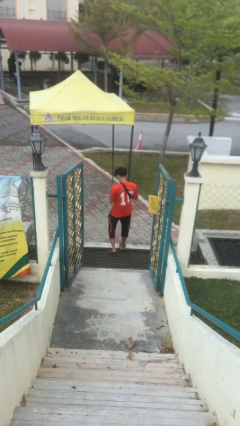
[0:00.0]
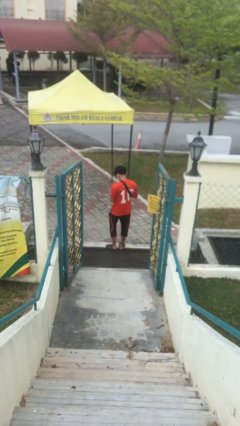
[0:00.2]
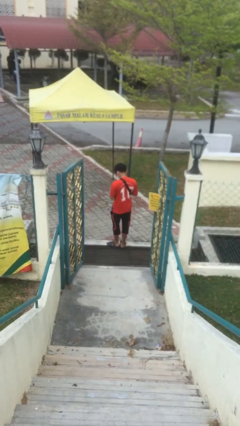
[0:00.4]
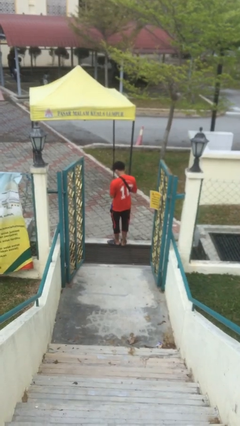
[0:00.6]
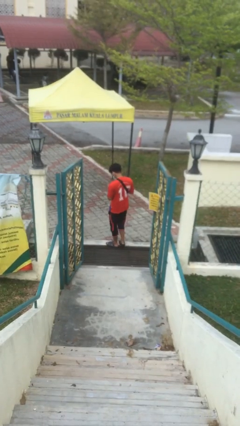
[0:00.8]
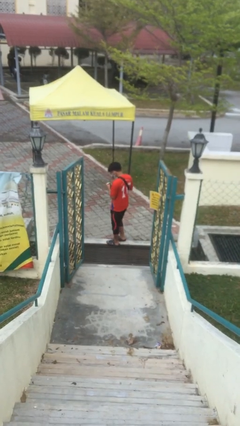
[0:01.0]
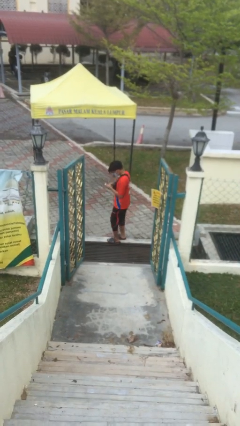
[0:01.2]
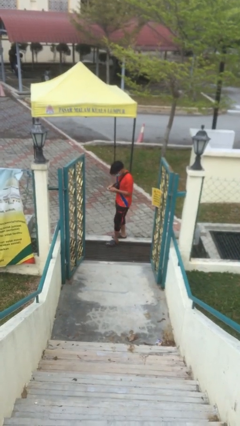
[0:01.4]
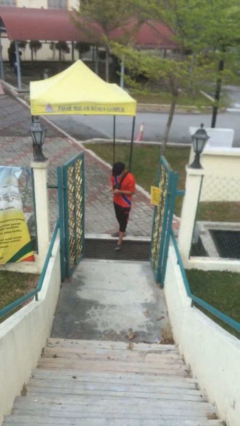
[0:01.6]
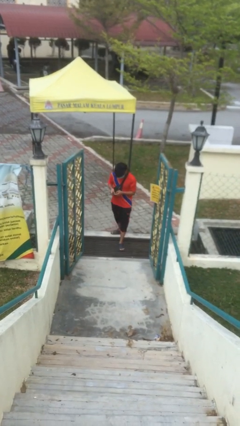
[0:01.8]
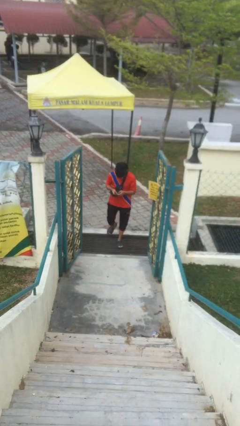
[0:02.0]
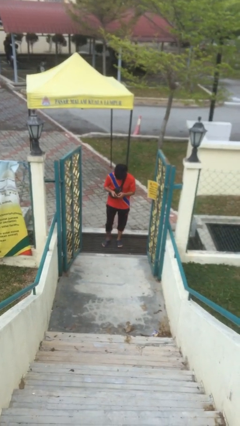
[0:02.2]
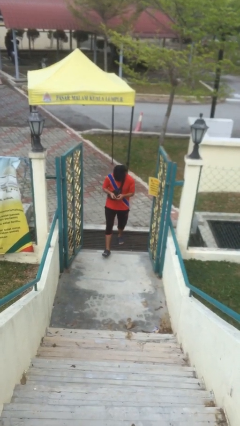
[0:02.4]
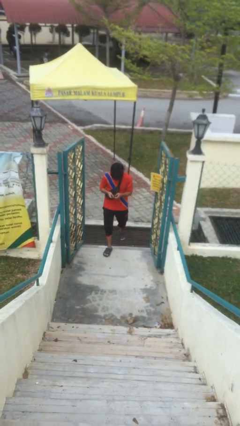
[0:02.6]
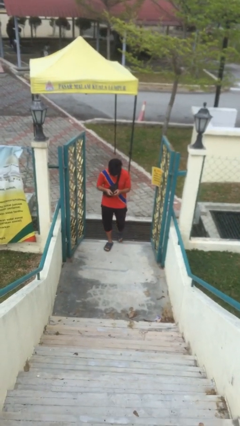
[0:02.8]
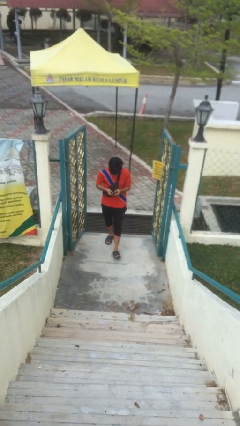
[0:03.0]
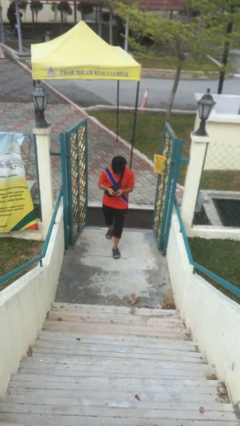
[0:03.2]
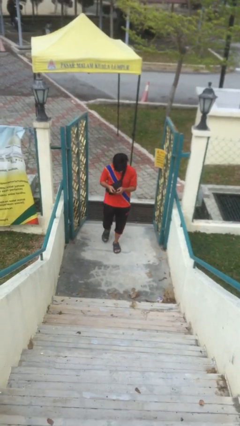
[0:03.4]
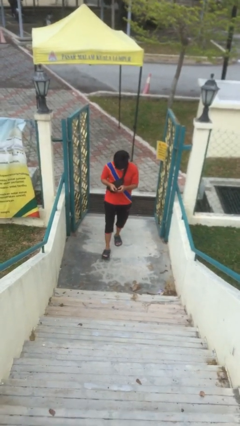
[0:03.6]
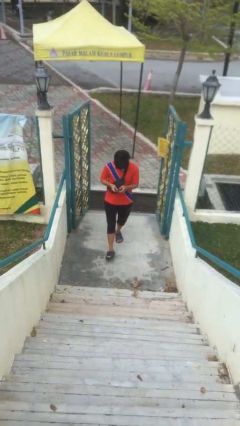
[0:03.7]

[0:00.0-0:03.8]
person enters scene through structure

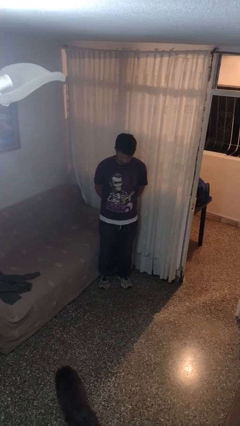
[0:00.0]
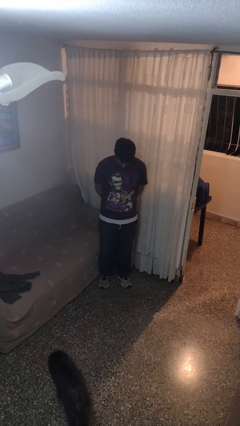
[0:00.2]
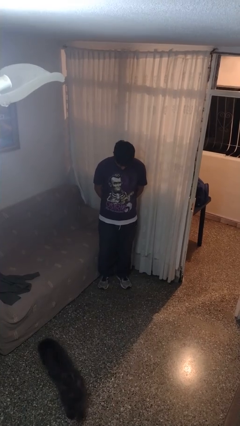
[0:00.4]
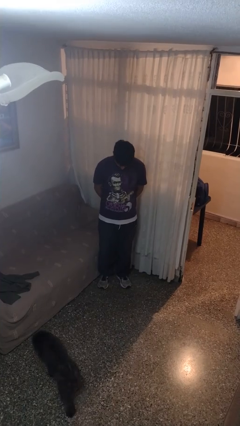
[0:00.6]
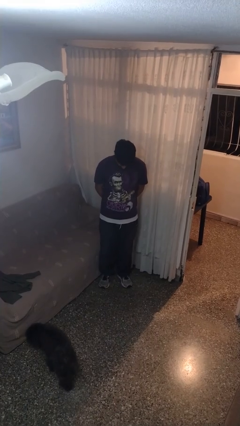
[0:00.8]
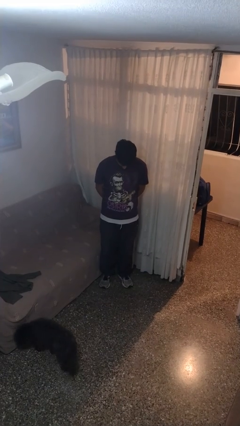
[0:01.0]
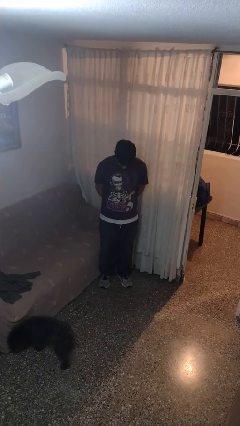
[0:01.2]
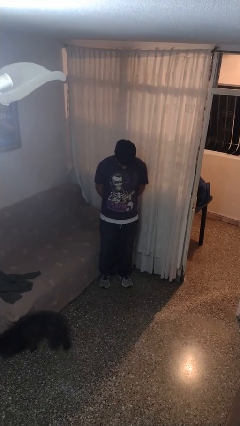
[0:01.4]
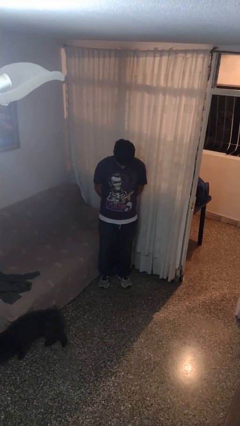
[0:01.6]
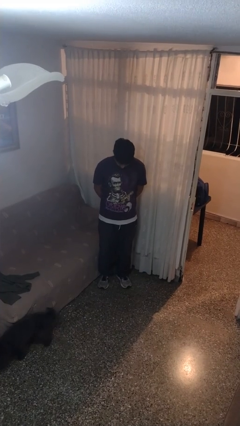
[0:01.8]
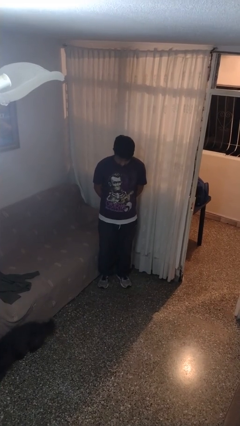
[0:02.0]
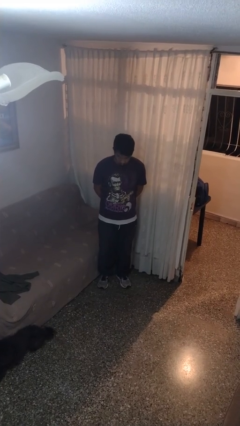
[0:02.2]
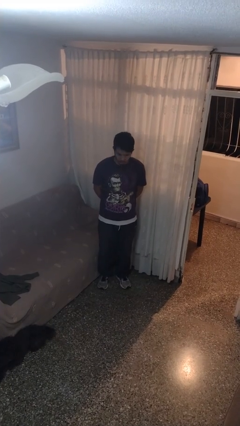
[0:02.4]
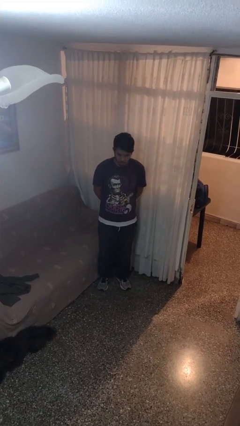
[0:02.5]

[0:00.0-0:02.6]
person prays

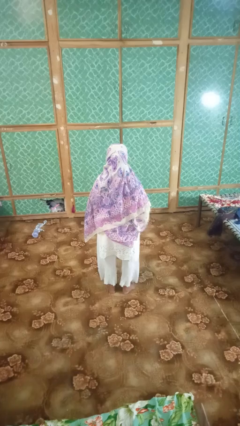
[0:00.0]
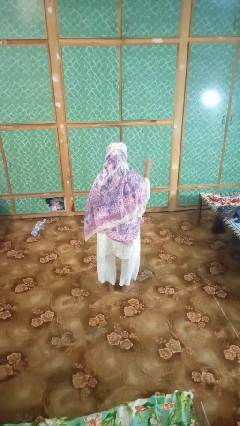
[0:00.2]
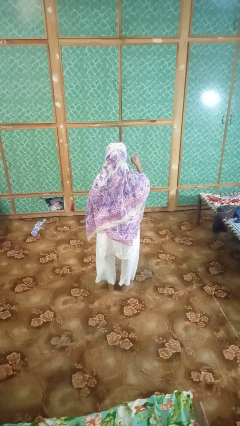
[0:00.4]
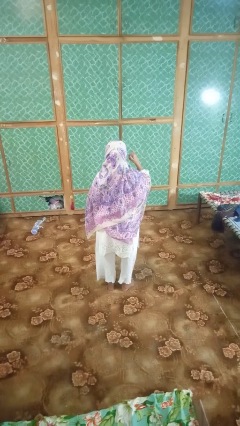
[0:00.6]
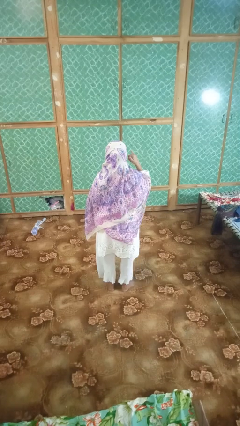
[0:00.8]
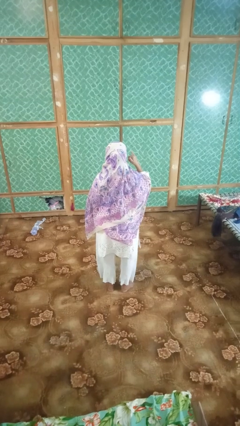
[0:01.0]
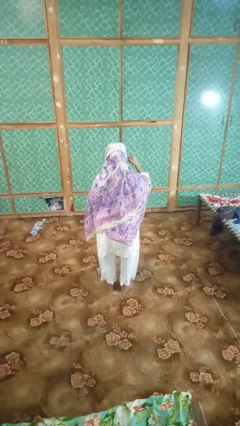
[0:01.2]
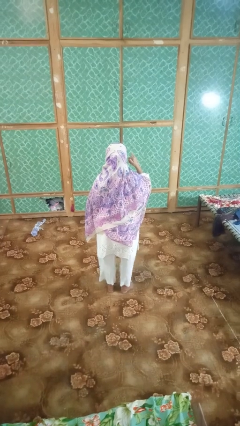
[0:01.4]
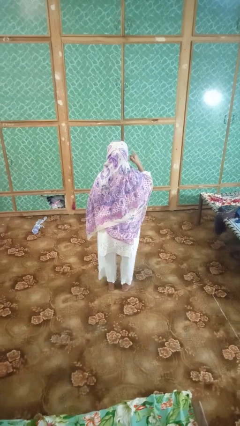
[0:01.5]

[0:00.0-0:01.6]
person gestures call me

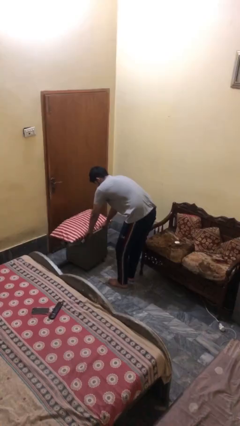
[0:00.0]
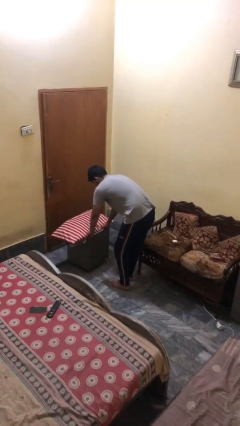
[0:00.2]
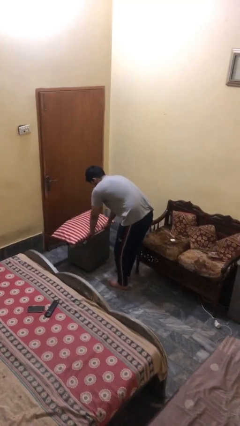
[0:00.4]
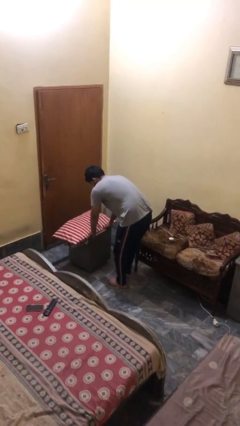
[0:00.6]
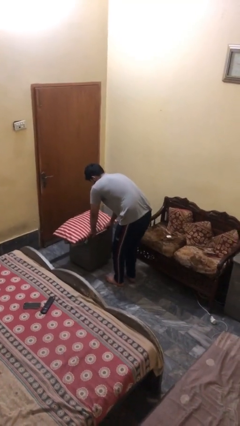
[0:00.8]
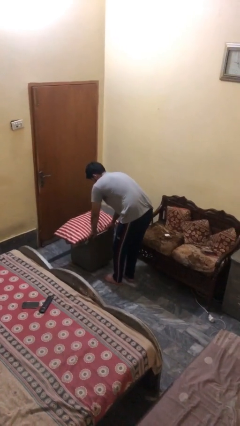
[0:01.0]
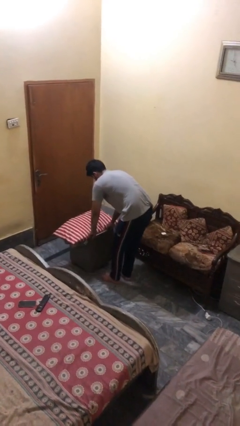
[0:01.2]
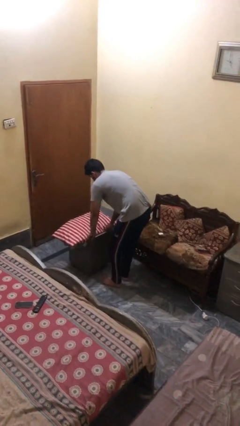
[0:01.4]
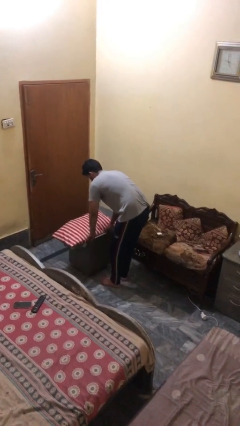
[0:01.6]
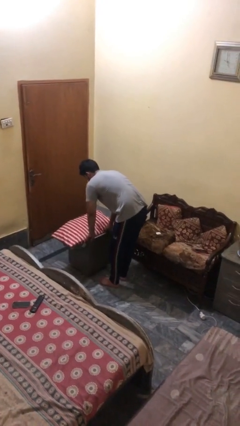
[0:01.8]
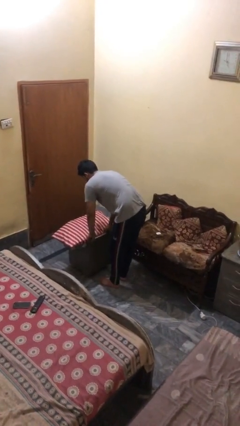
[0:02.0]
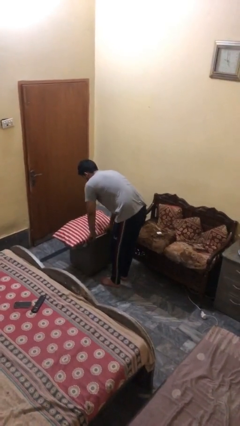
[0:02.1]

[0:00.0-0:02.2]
person pulls wheeled cart

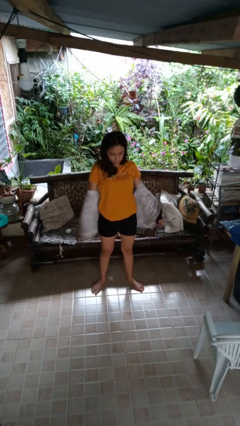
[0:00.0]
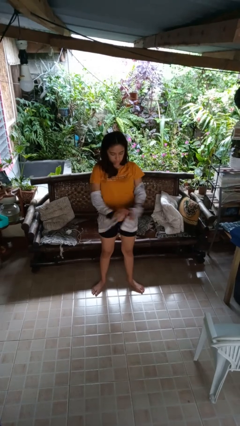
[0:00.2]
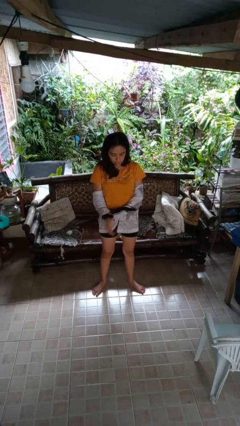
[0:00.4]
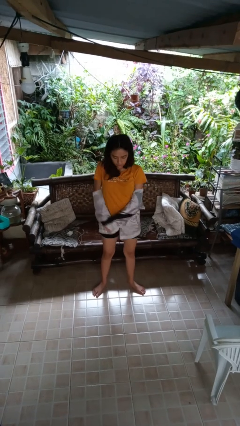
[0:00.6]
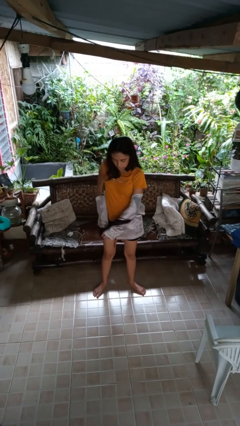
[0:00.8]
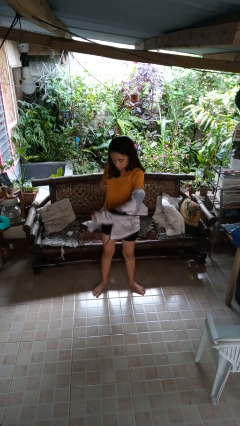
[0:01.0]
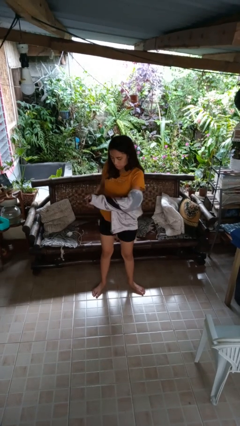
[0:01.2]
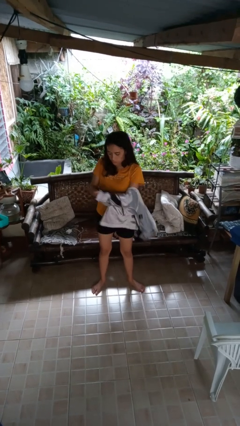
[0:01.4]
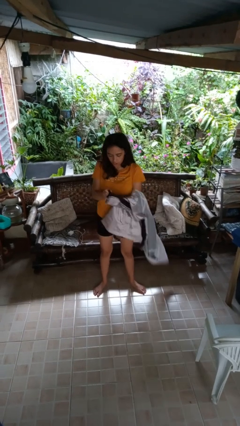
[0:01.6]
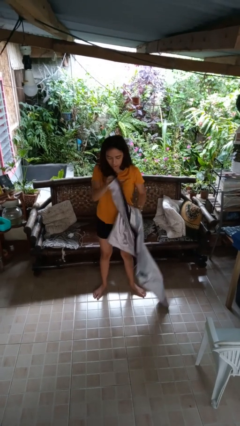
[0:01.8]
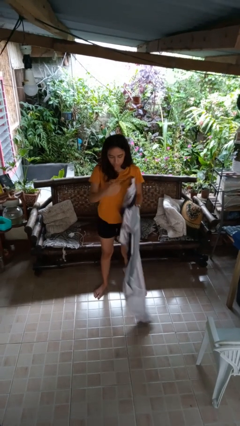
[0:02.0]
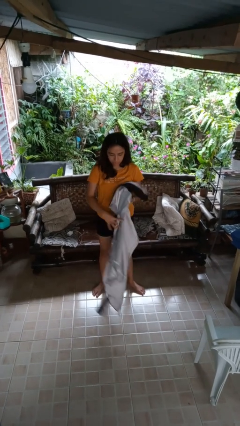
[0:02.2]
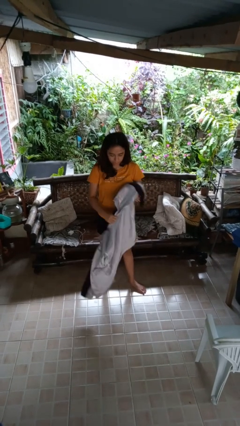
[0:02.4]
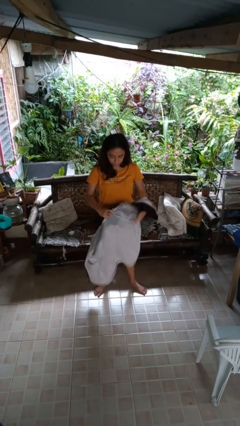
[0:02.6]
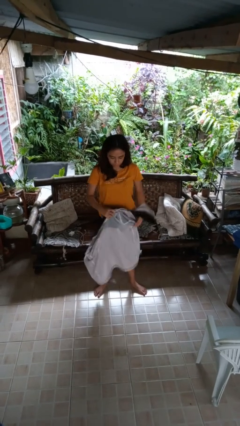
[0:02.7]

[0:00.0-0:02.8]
person takes off jacket

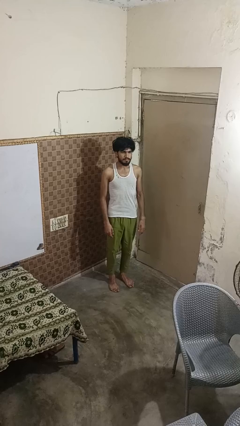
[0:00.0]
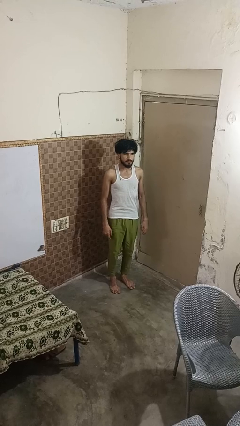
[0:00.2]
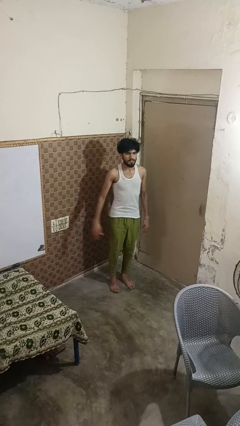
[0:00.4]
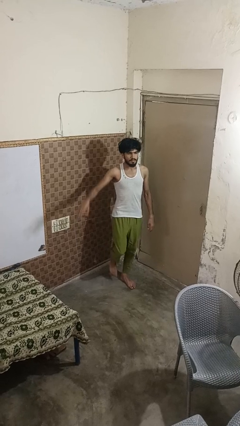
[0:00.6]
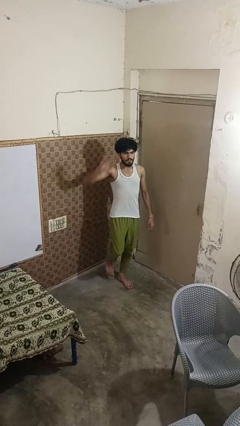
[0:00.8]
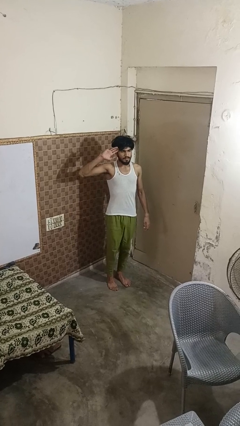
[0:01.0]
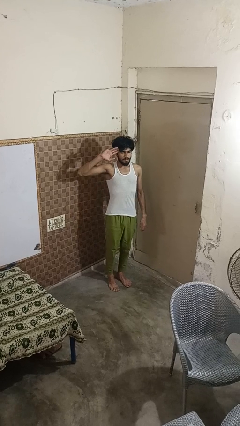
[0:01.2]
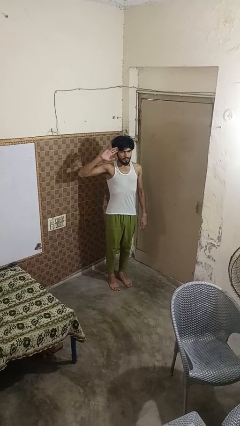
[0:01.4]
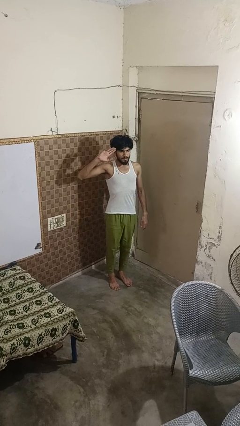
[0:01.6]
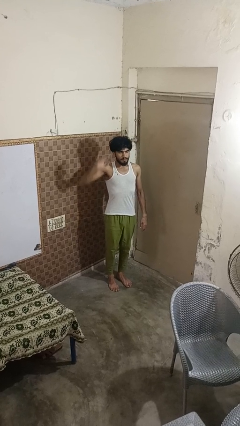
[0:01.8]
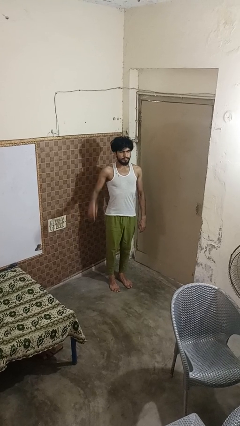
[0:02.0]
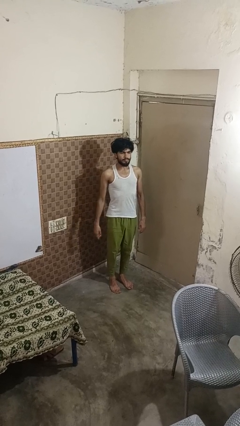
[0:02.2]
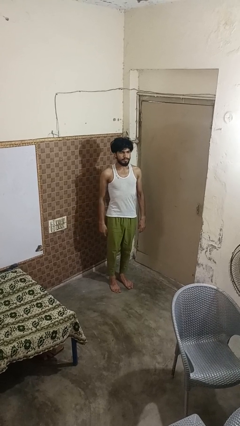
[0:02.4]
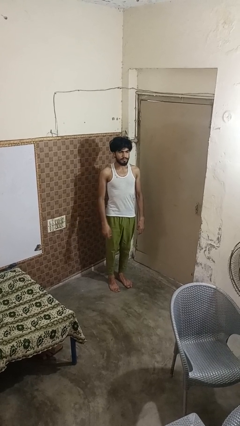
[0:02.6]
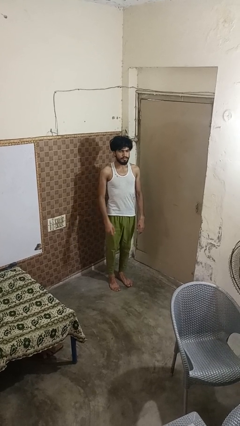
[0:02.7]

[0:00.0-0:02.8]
person salutes

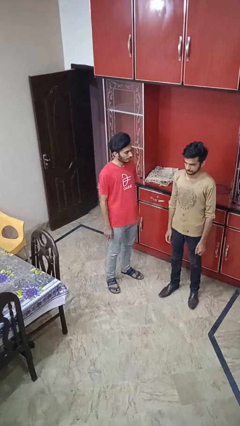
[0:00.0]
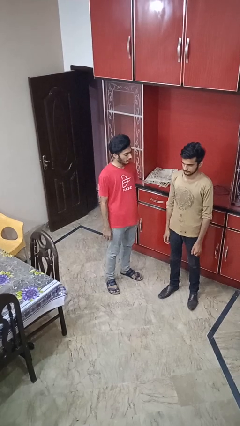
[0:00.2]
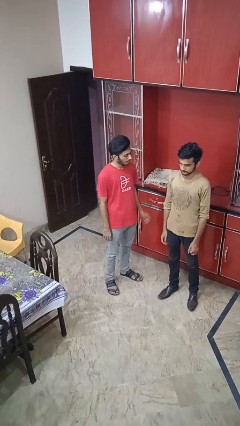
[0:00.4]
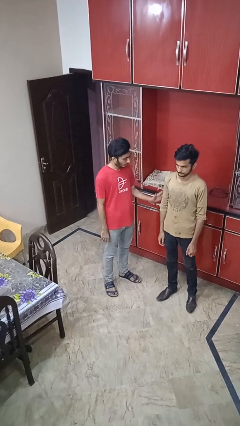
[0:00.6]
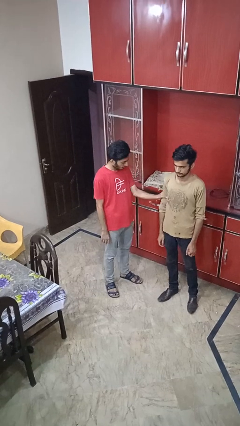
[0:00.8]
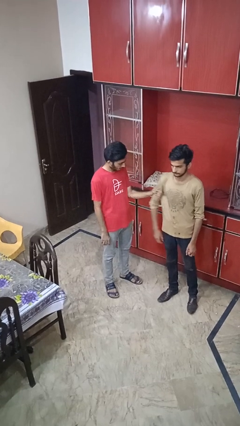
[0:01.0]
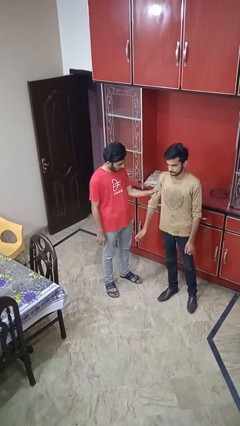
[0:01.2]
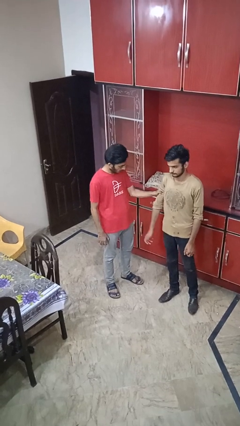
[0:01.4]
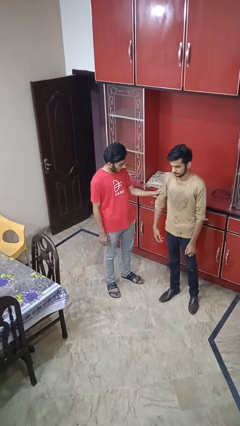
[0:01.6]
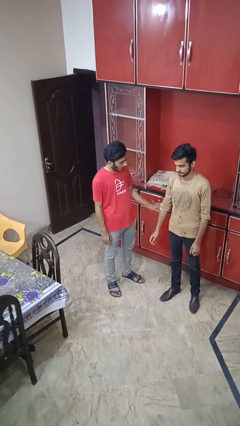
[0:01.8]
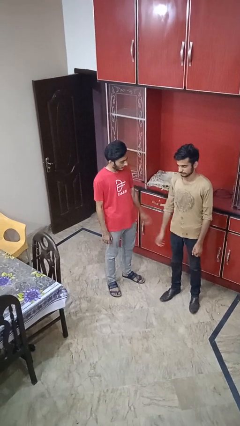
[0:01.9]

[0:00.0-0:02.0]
person grabs person by bicep
